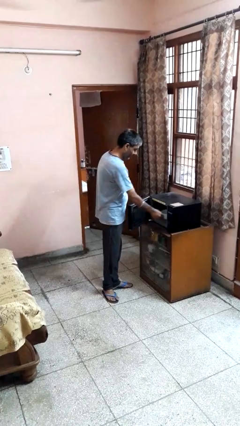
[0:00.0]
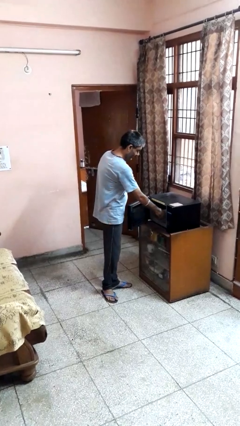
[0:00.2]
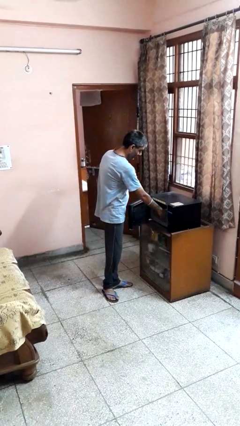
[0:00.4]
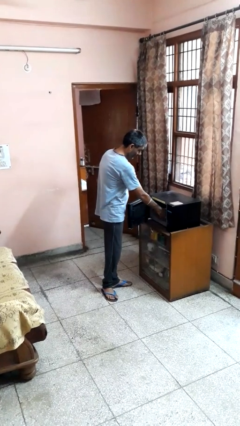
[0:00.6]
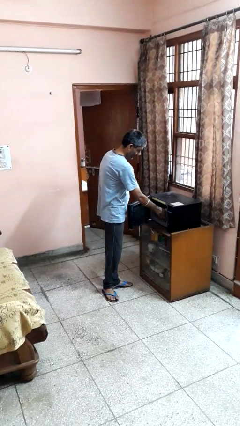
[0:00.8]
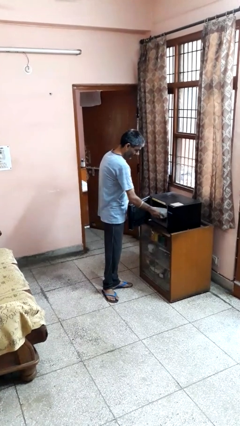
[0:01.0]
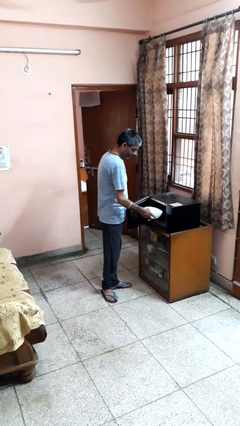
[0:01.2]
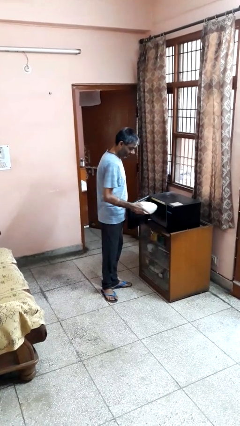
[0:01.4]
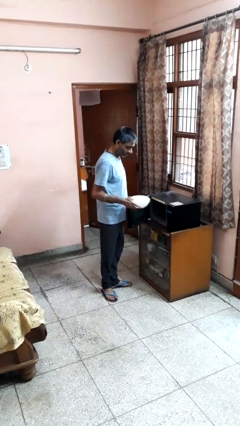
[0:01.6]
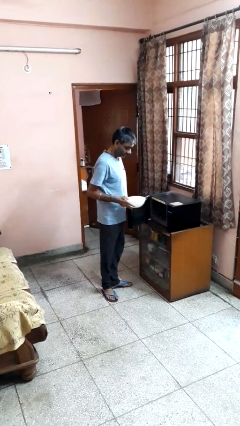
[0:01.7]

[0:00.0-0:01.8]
person takes object from microwave

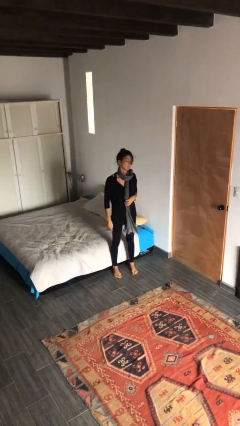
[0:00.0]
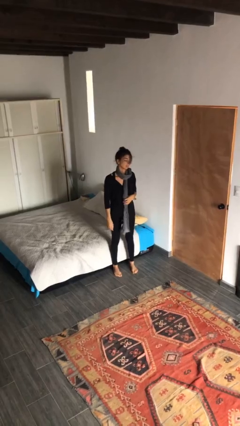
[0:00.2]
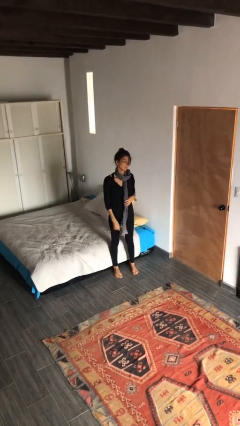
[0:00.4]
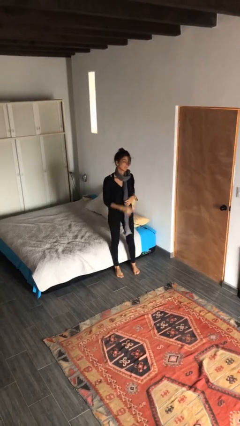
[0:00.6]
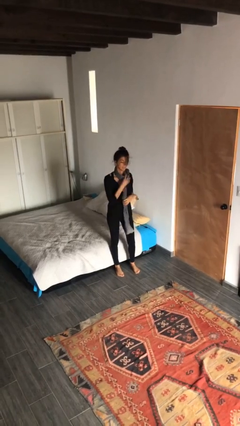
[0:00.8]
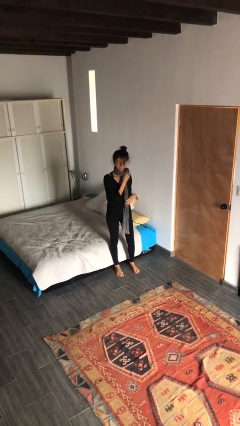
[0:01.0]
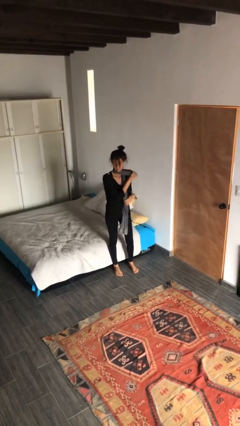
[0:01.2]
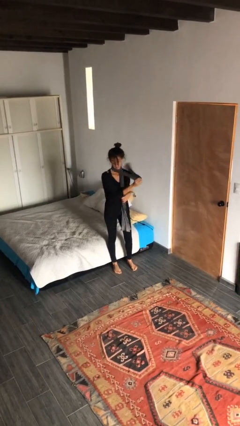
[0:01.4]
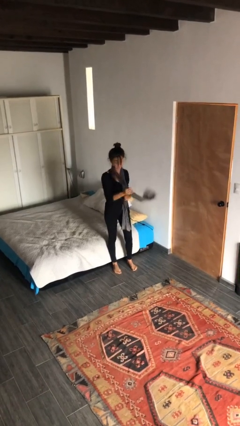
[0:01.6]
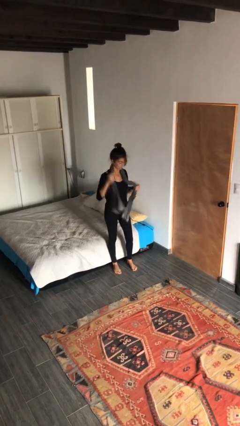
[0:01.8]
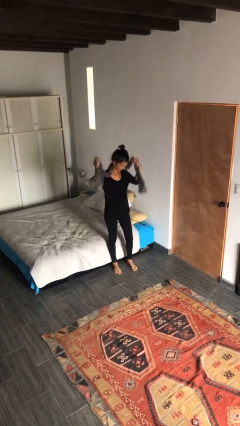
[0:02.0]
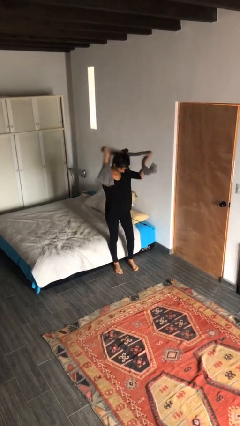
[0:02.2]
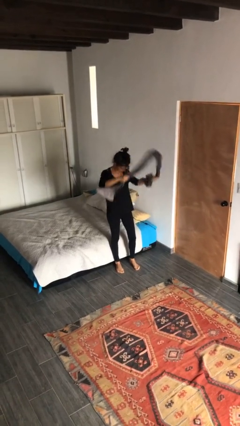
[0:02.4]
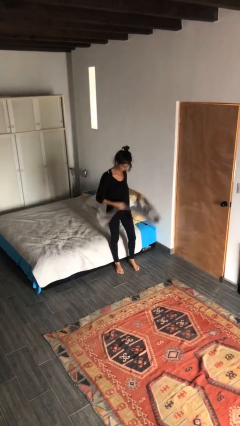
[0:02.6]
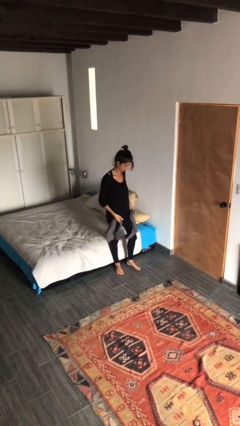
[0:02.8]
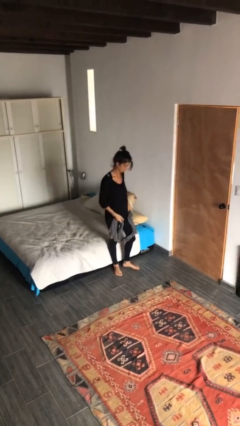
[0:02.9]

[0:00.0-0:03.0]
person takes off scarf

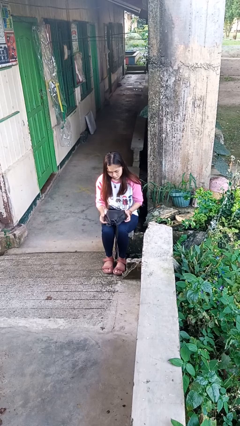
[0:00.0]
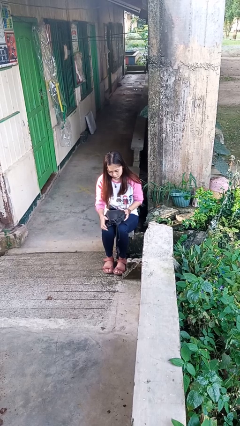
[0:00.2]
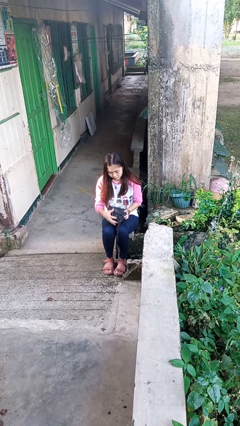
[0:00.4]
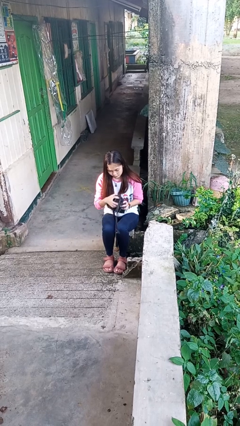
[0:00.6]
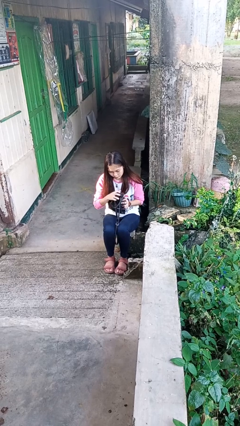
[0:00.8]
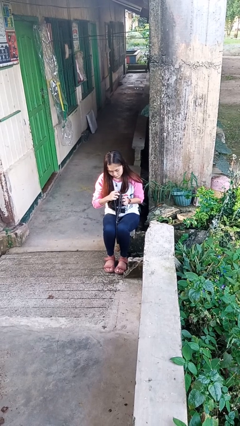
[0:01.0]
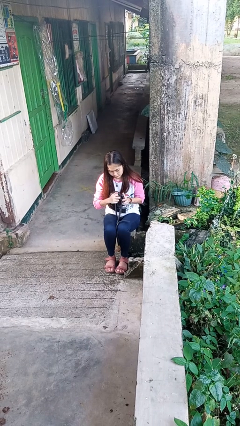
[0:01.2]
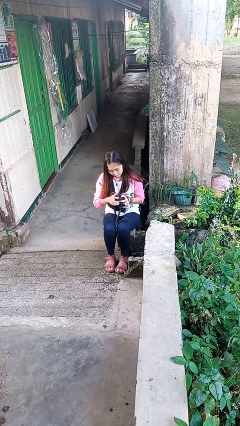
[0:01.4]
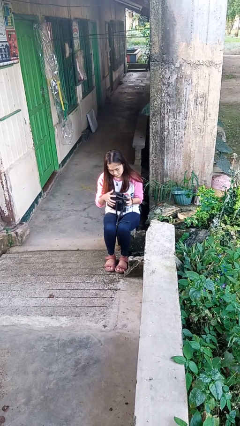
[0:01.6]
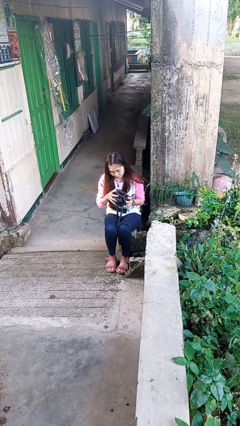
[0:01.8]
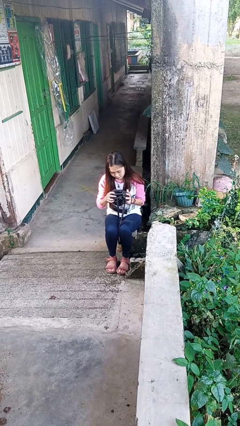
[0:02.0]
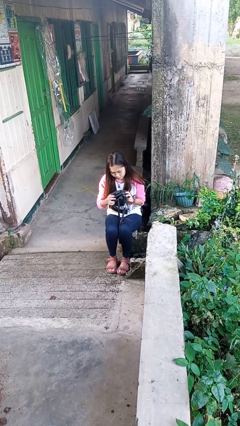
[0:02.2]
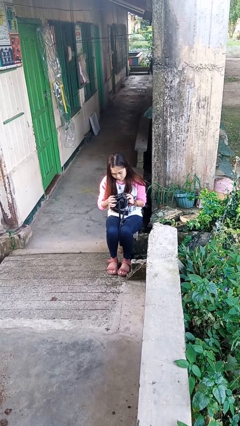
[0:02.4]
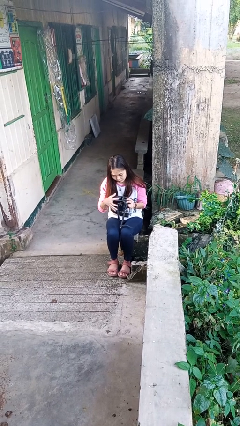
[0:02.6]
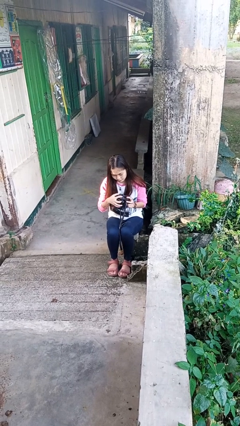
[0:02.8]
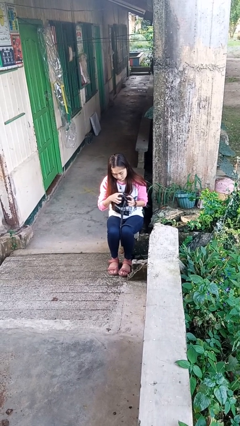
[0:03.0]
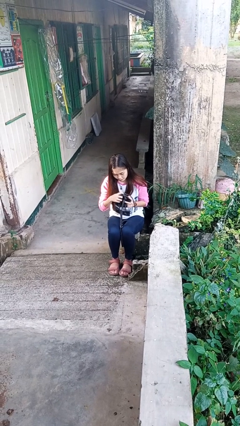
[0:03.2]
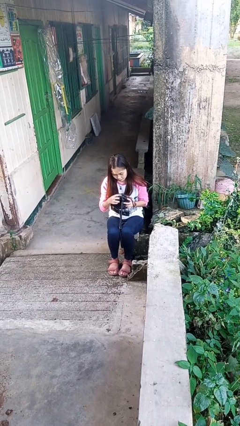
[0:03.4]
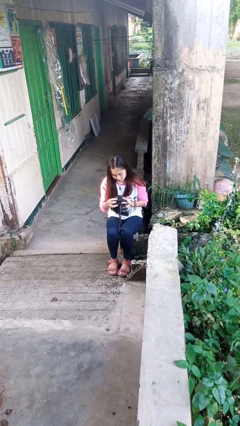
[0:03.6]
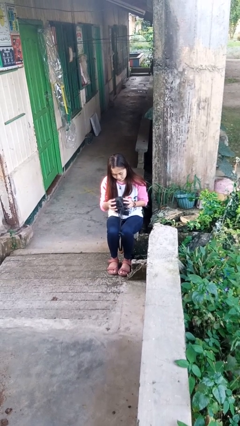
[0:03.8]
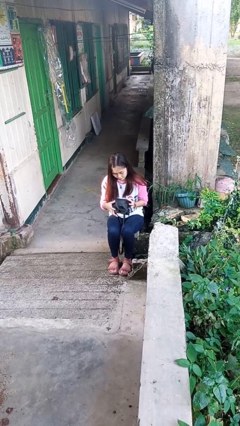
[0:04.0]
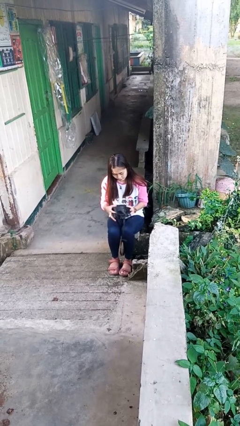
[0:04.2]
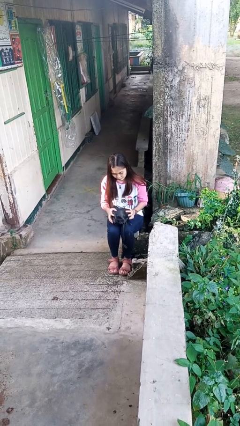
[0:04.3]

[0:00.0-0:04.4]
person squeezes object

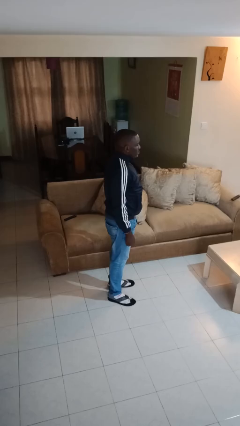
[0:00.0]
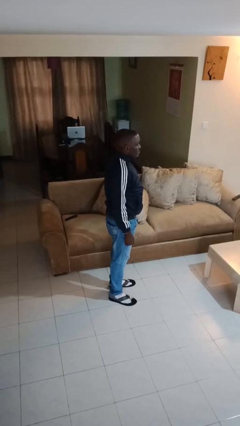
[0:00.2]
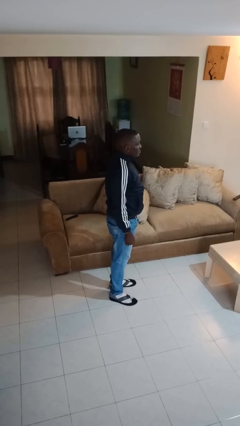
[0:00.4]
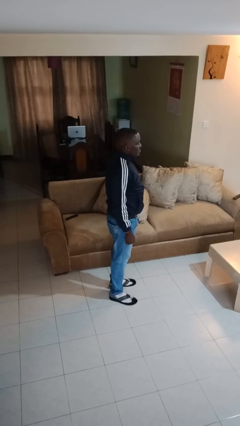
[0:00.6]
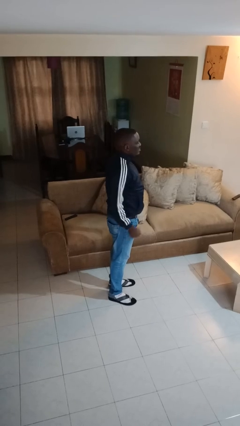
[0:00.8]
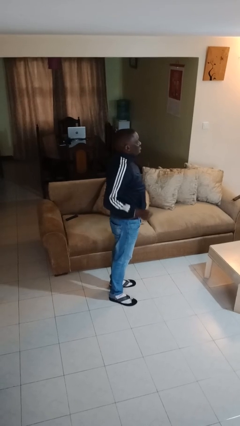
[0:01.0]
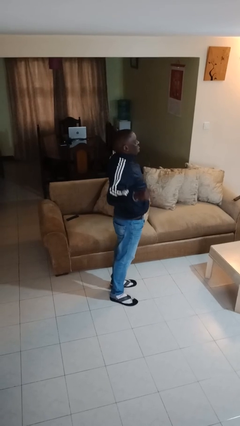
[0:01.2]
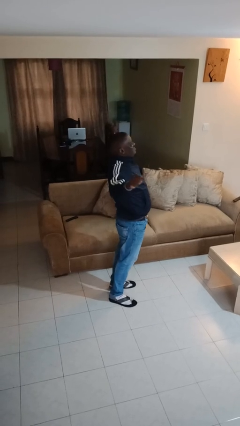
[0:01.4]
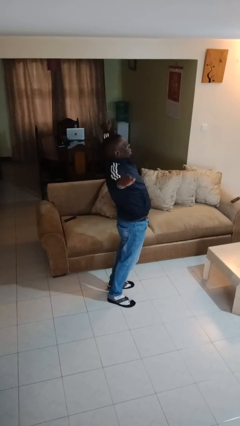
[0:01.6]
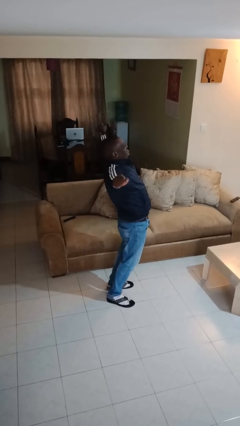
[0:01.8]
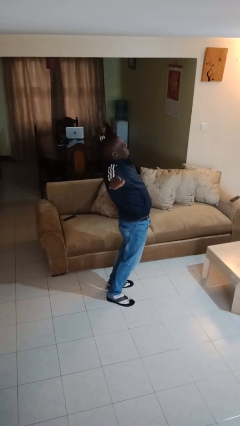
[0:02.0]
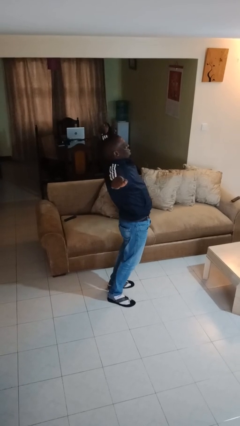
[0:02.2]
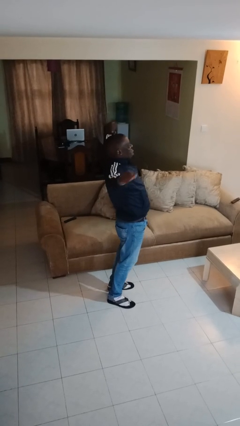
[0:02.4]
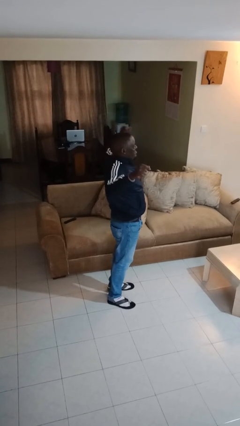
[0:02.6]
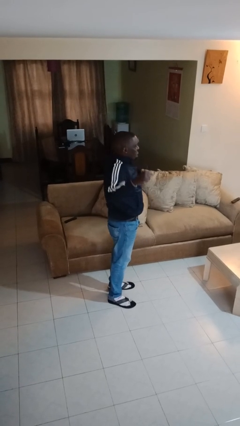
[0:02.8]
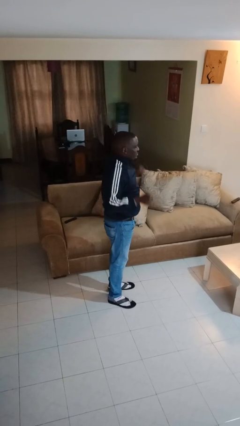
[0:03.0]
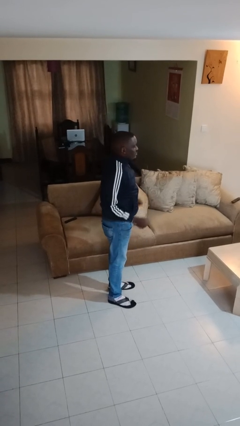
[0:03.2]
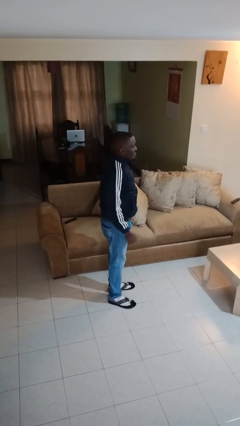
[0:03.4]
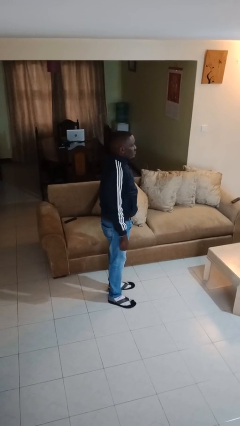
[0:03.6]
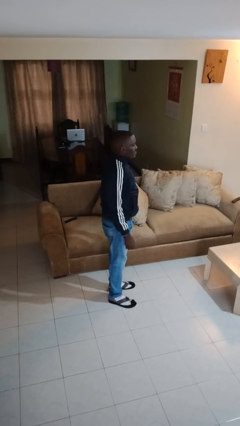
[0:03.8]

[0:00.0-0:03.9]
person stretches arms to side

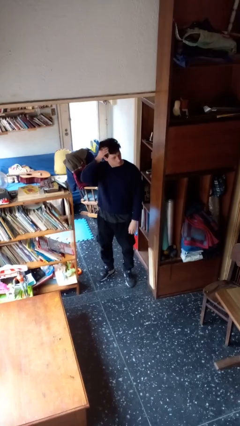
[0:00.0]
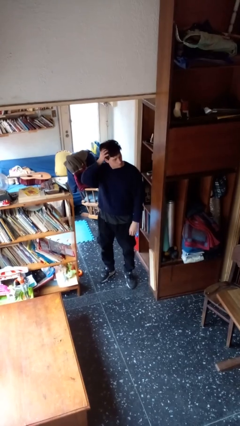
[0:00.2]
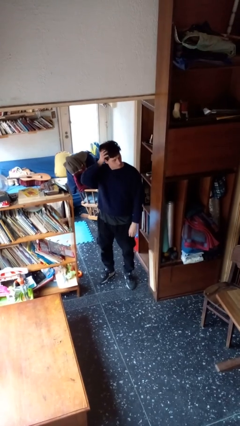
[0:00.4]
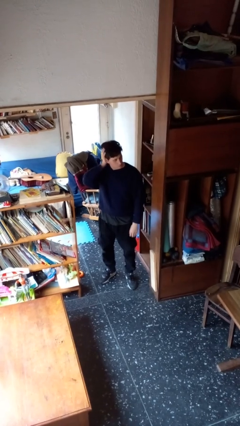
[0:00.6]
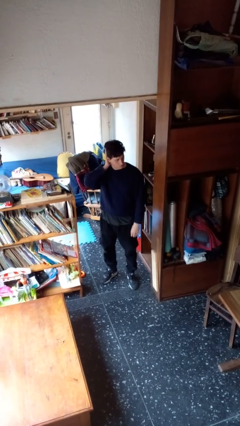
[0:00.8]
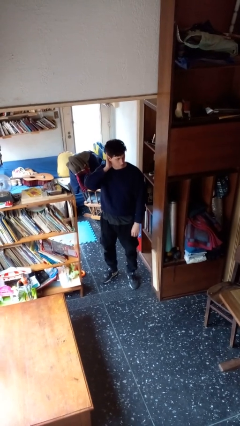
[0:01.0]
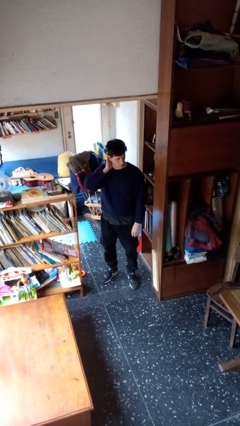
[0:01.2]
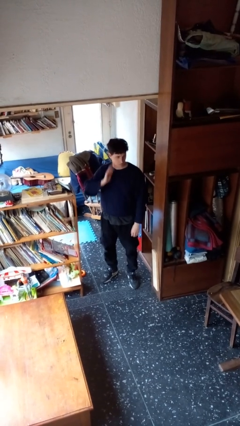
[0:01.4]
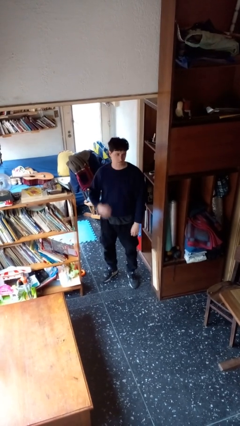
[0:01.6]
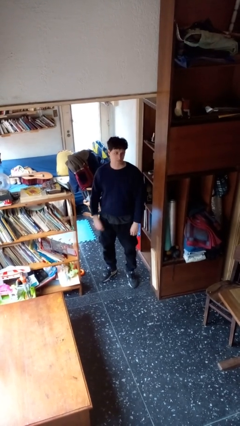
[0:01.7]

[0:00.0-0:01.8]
person pats head

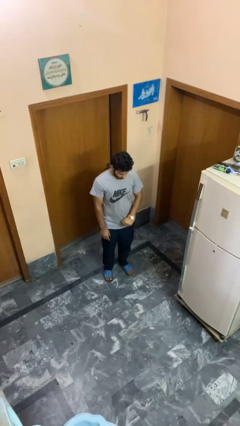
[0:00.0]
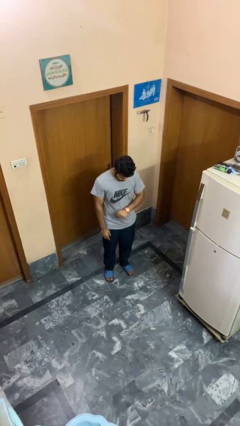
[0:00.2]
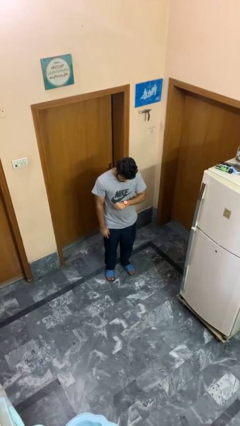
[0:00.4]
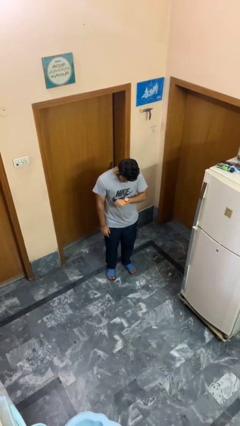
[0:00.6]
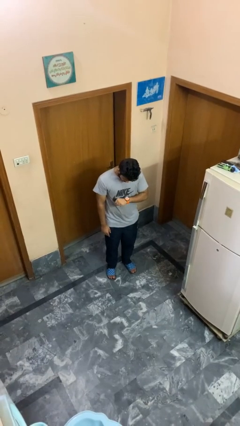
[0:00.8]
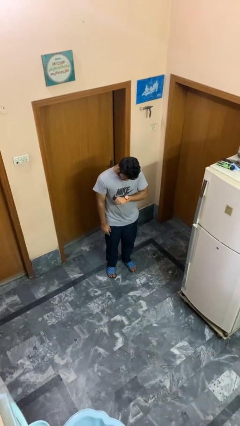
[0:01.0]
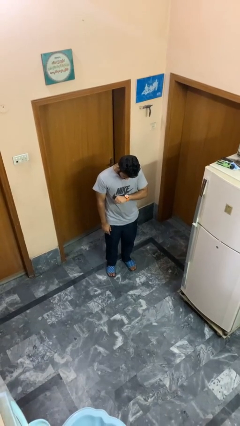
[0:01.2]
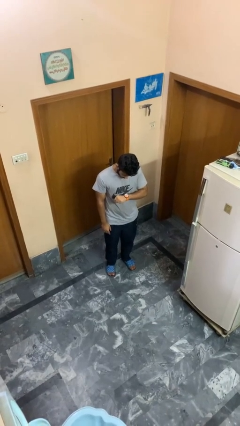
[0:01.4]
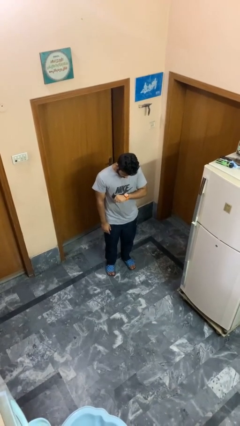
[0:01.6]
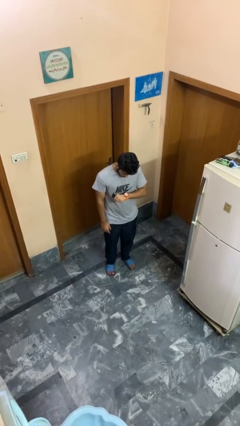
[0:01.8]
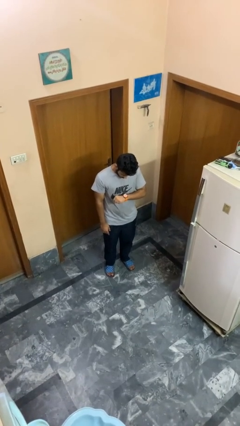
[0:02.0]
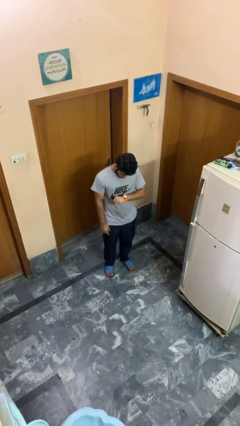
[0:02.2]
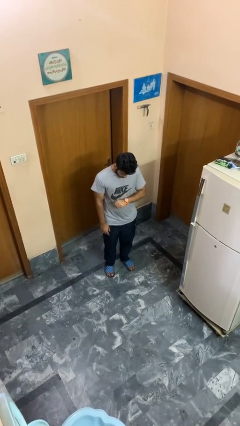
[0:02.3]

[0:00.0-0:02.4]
person looks at wristwatch
